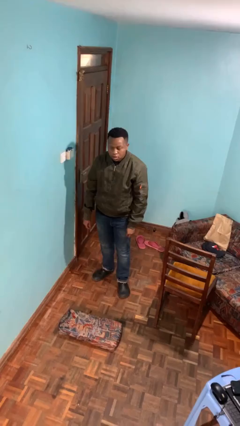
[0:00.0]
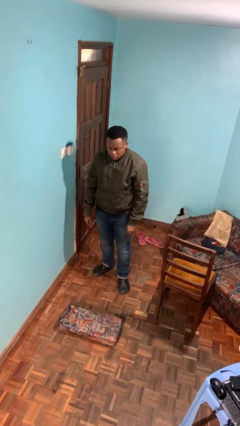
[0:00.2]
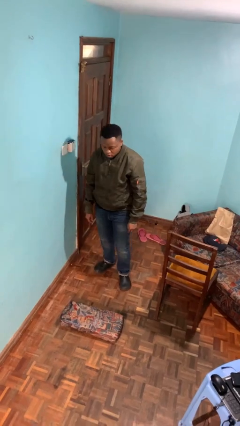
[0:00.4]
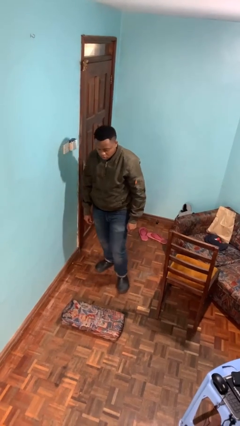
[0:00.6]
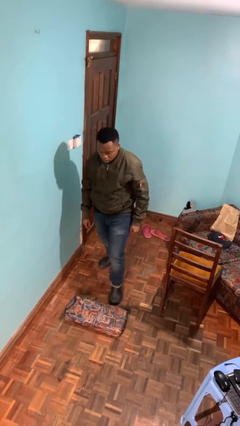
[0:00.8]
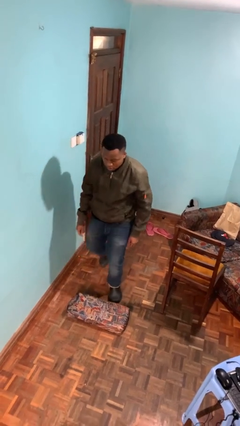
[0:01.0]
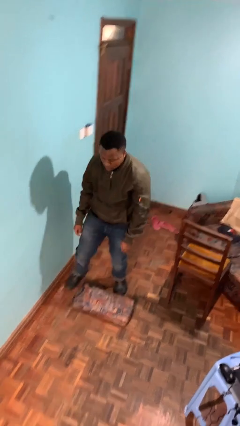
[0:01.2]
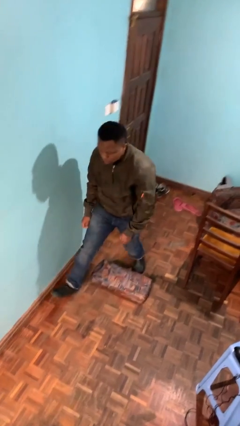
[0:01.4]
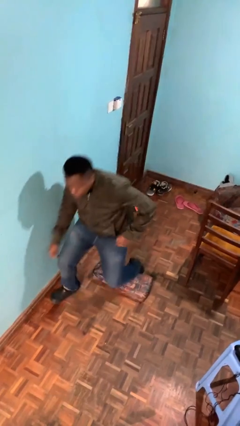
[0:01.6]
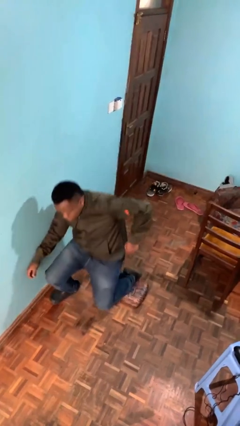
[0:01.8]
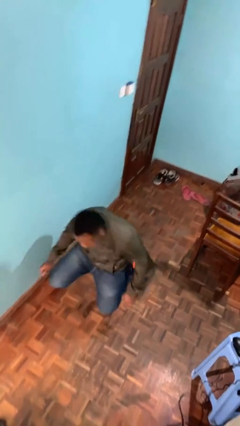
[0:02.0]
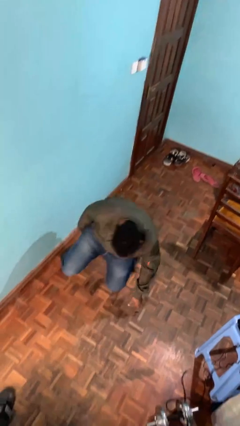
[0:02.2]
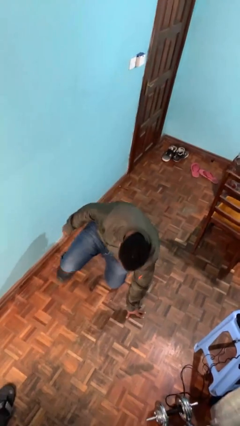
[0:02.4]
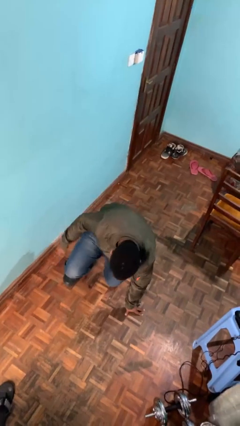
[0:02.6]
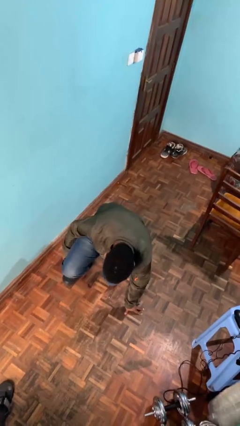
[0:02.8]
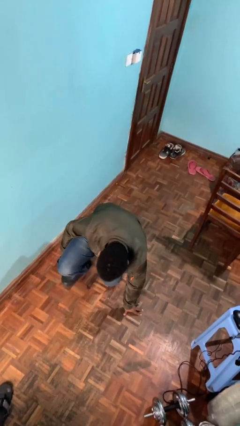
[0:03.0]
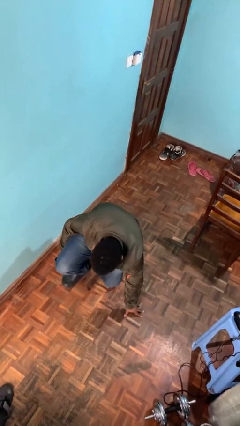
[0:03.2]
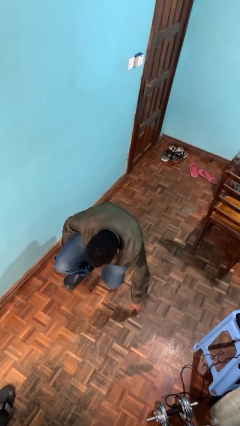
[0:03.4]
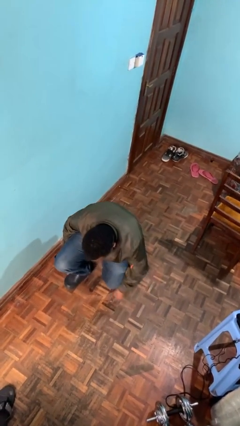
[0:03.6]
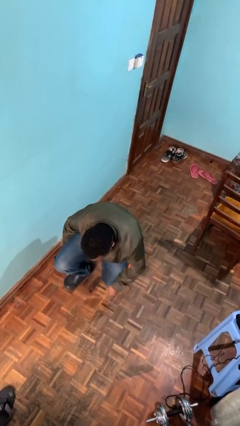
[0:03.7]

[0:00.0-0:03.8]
person trips on object on floor

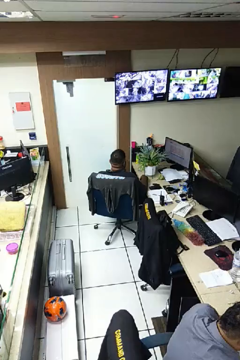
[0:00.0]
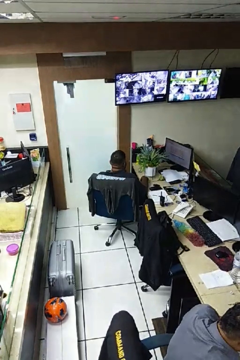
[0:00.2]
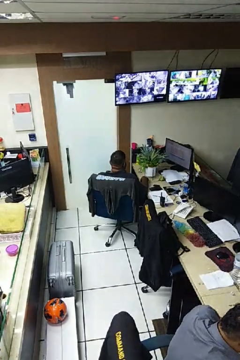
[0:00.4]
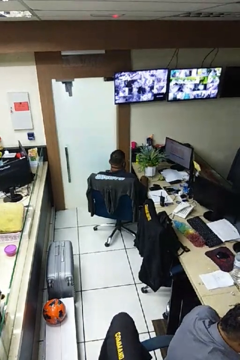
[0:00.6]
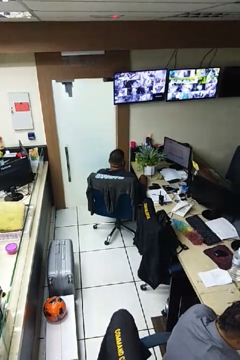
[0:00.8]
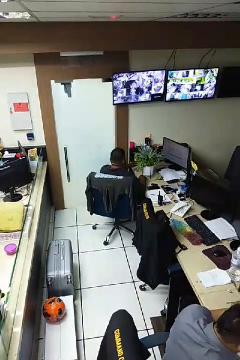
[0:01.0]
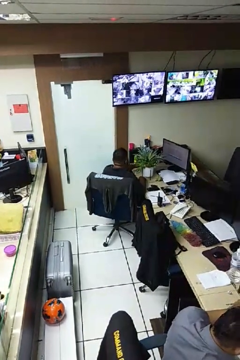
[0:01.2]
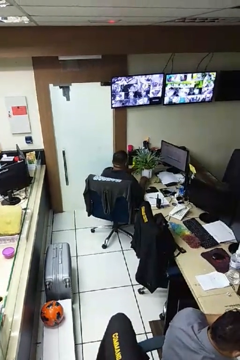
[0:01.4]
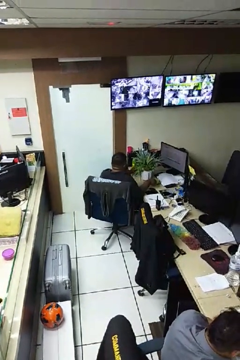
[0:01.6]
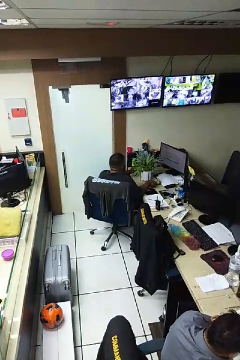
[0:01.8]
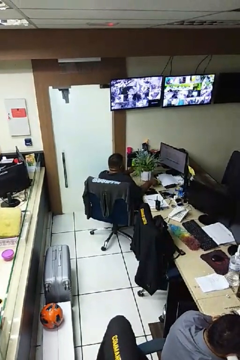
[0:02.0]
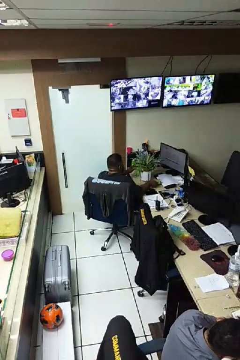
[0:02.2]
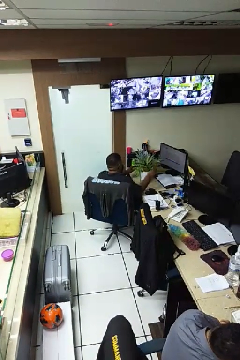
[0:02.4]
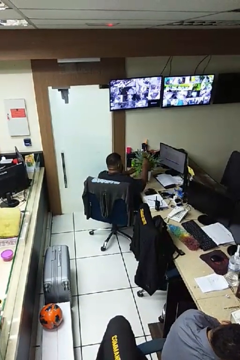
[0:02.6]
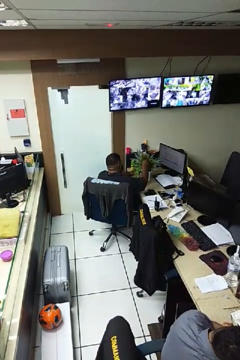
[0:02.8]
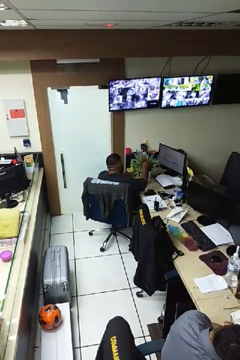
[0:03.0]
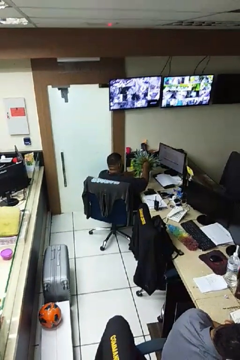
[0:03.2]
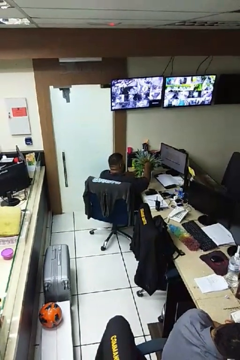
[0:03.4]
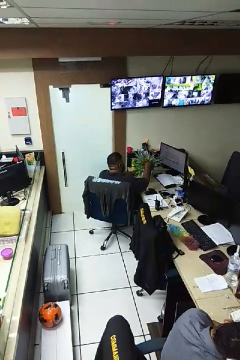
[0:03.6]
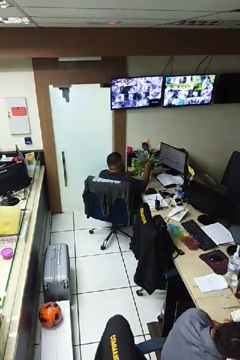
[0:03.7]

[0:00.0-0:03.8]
person arranges flowers in vase

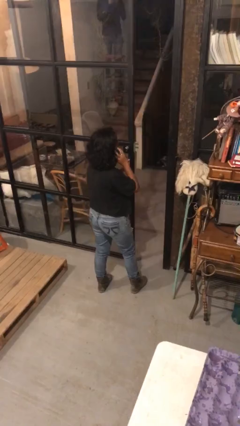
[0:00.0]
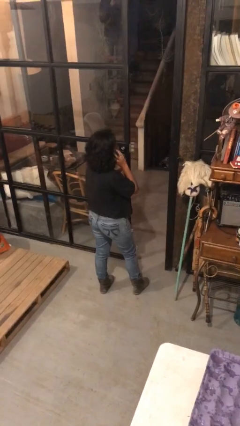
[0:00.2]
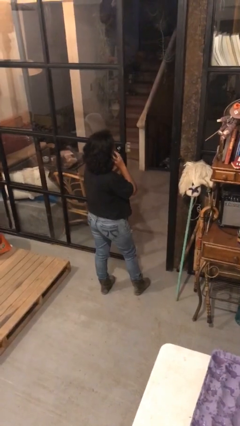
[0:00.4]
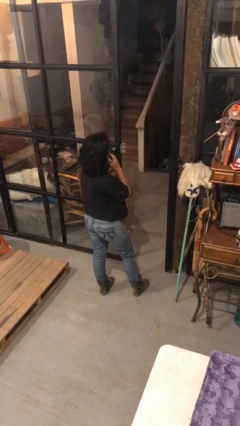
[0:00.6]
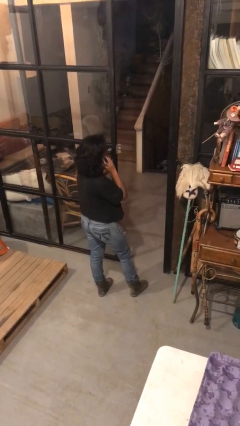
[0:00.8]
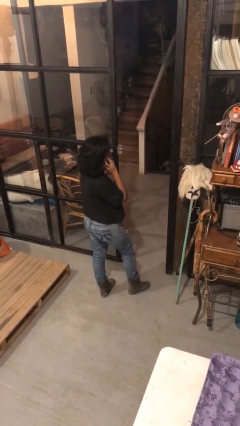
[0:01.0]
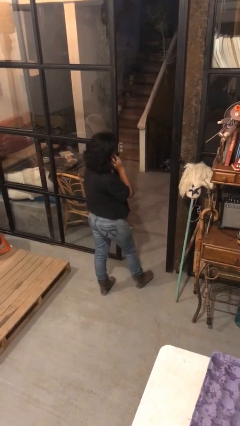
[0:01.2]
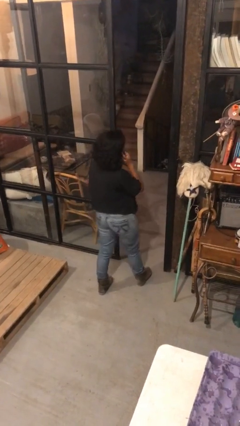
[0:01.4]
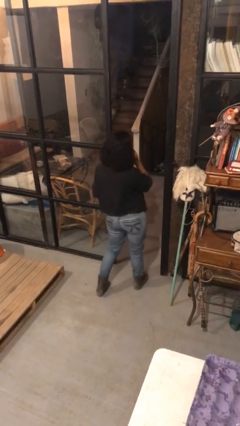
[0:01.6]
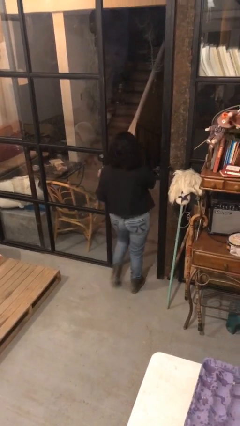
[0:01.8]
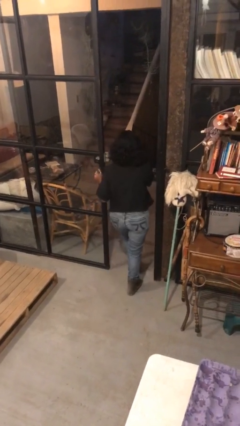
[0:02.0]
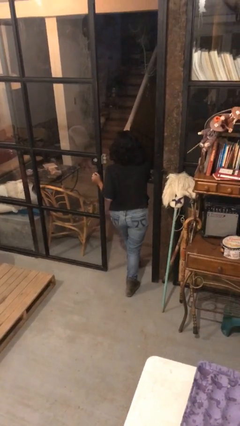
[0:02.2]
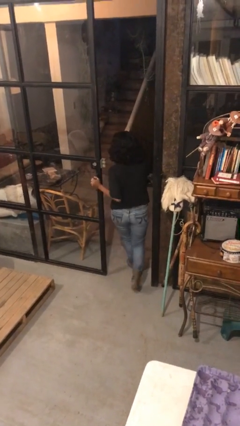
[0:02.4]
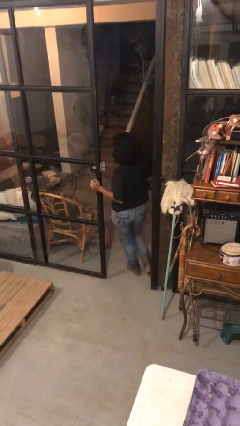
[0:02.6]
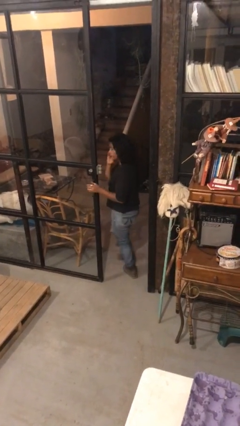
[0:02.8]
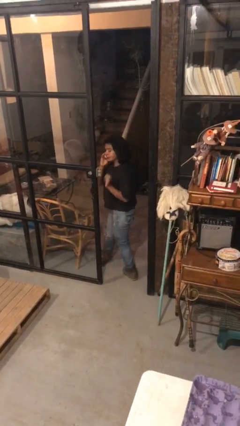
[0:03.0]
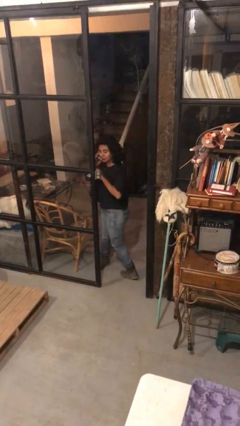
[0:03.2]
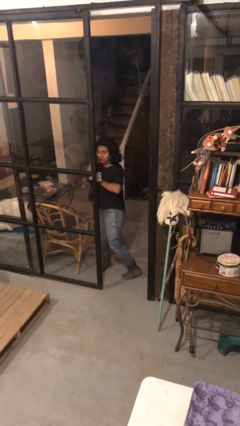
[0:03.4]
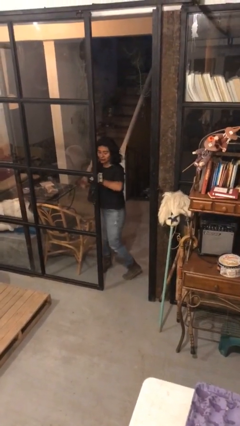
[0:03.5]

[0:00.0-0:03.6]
person exits scene through structure

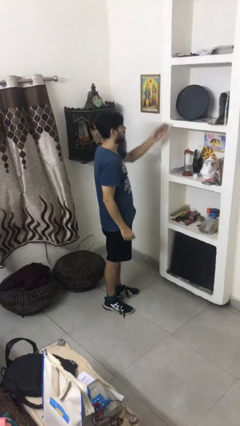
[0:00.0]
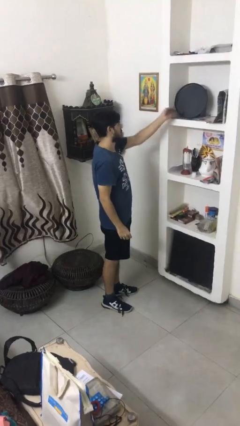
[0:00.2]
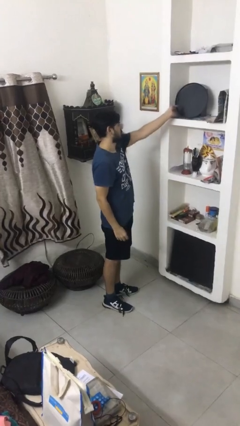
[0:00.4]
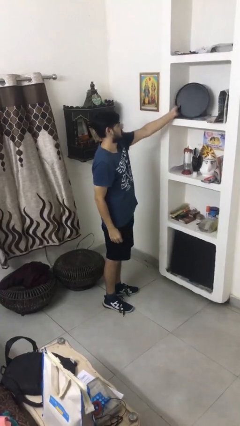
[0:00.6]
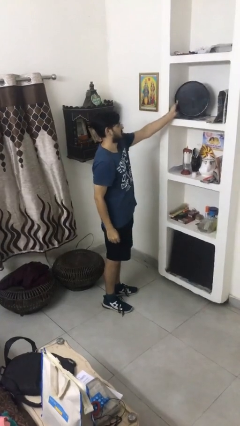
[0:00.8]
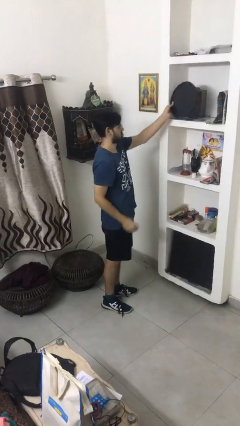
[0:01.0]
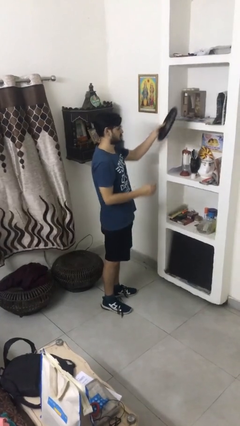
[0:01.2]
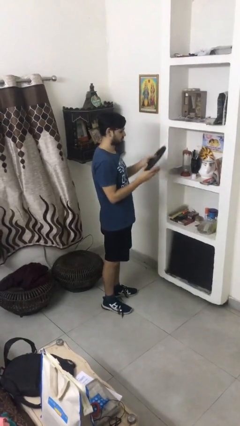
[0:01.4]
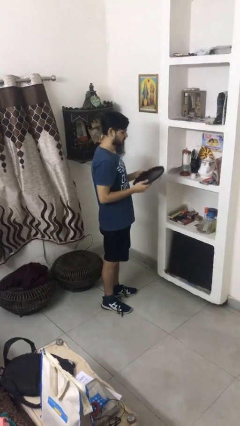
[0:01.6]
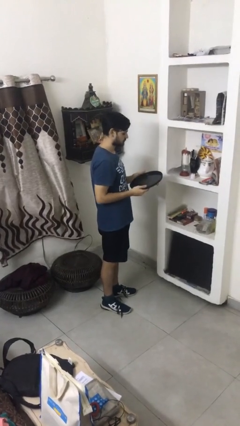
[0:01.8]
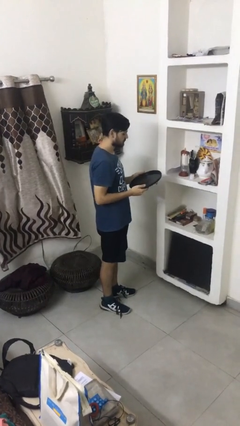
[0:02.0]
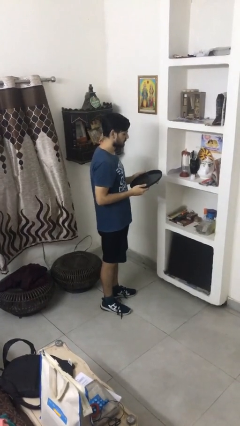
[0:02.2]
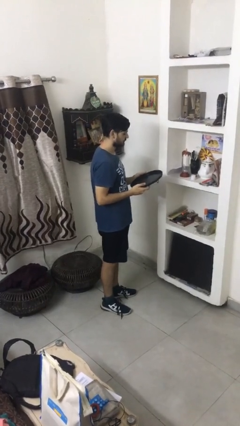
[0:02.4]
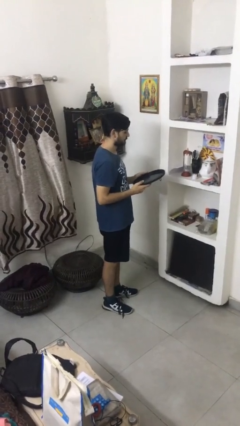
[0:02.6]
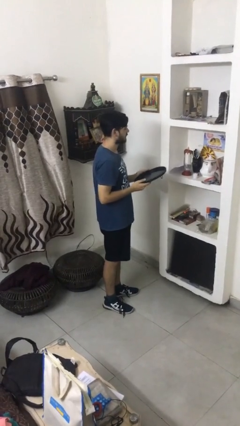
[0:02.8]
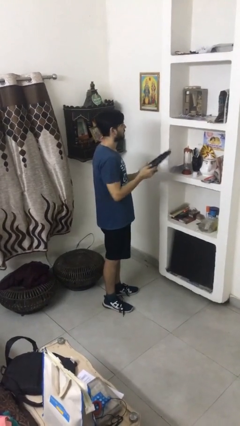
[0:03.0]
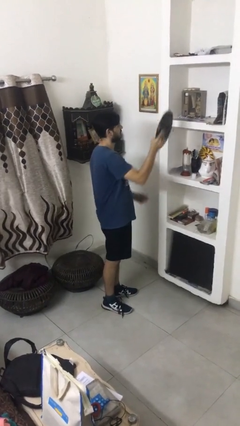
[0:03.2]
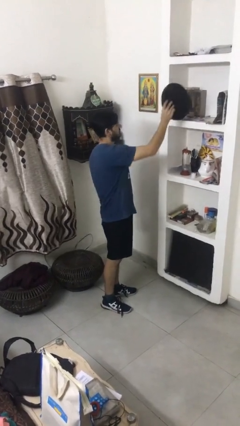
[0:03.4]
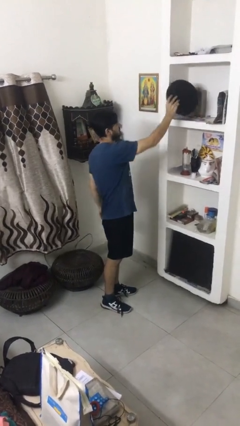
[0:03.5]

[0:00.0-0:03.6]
person picks up object from shelf

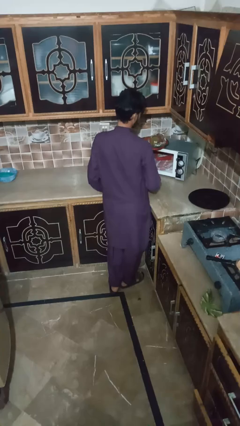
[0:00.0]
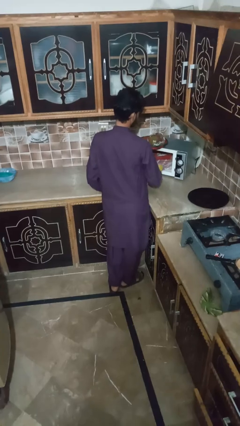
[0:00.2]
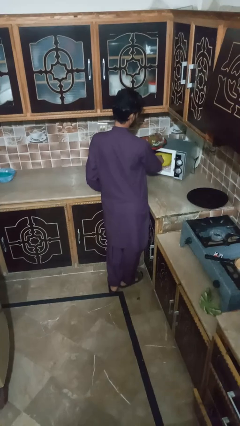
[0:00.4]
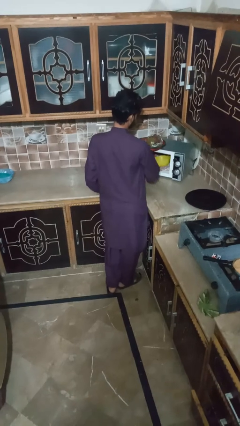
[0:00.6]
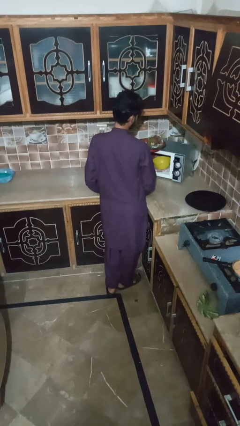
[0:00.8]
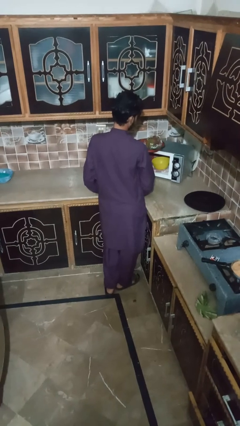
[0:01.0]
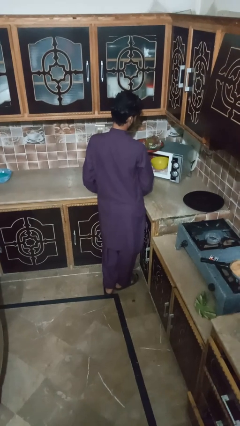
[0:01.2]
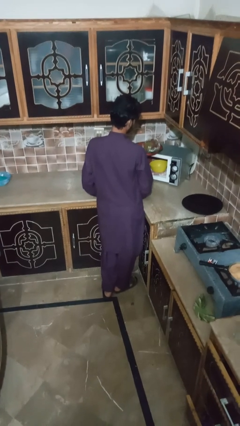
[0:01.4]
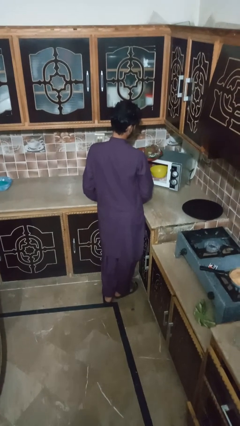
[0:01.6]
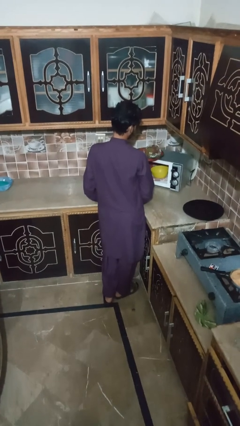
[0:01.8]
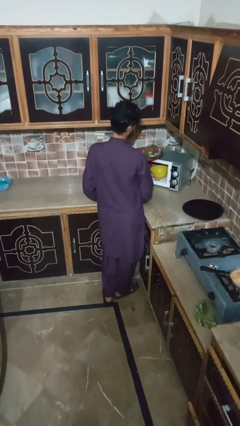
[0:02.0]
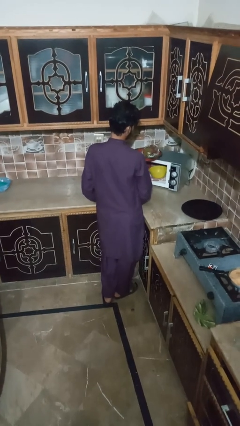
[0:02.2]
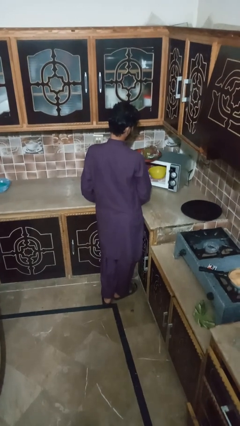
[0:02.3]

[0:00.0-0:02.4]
person puts object into microwave

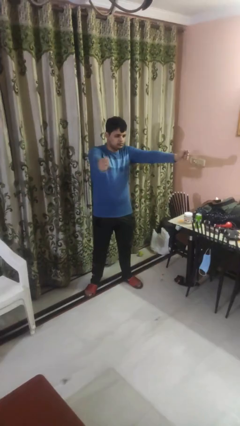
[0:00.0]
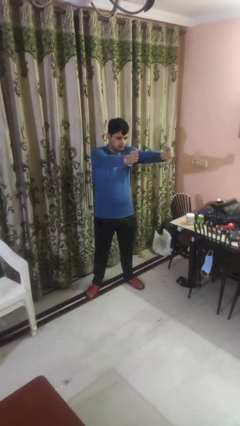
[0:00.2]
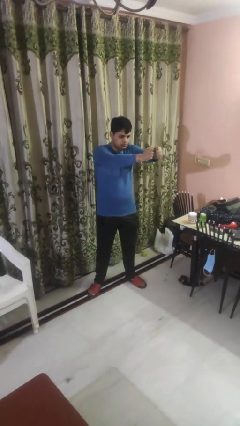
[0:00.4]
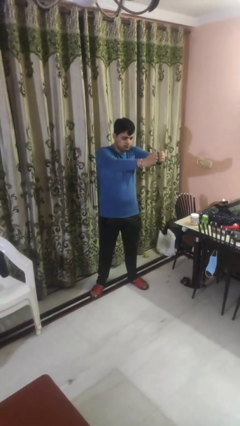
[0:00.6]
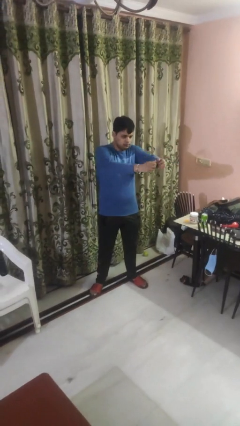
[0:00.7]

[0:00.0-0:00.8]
person gestures zoom out
